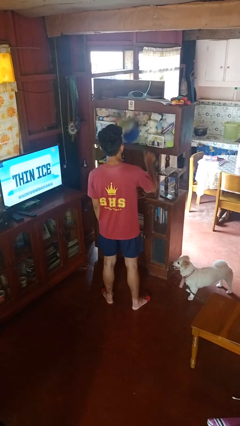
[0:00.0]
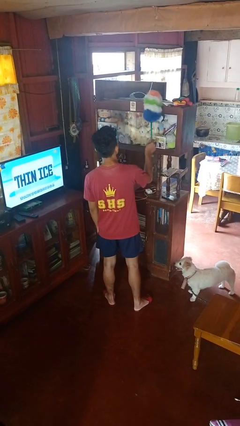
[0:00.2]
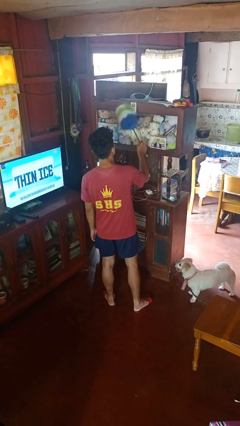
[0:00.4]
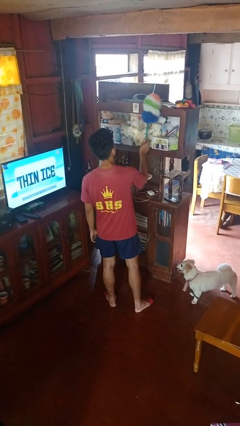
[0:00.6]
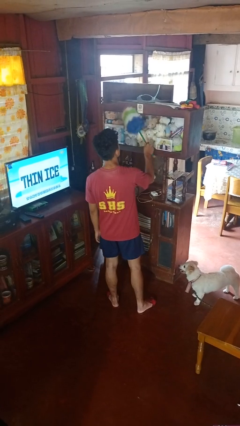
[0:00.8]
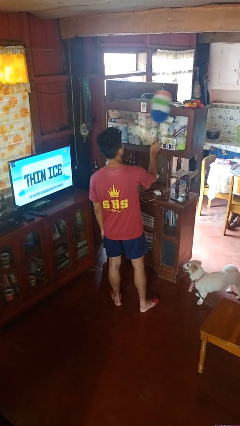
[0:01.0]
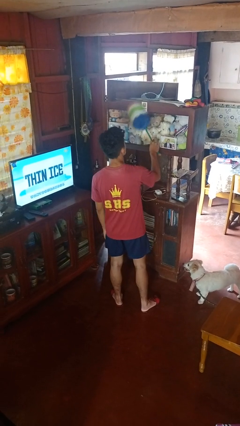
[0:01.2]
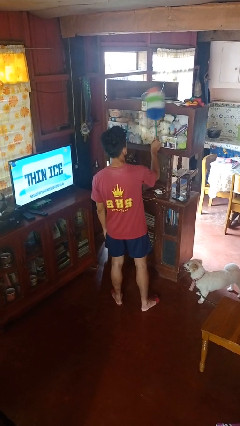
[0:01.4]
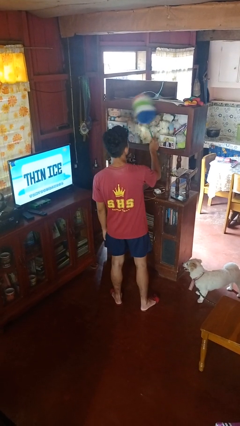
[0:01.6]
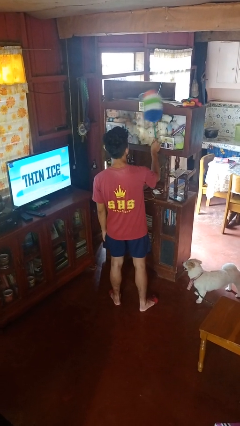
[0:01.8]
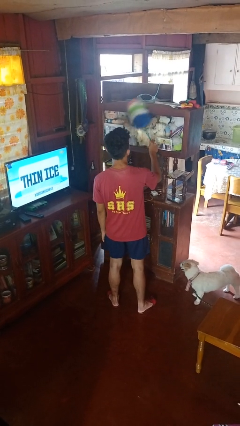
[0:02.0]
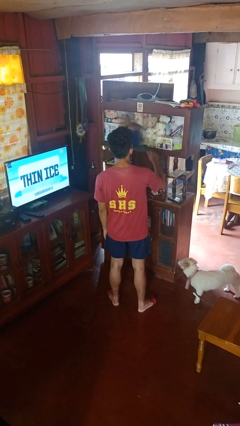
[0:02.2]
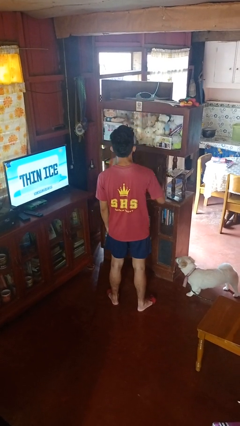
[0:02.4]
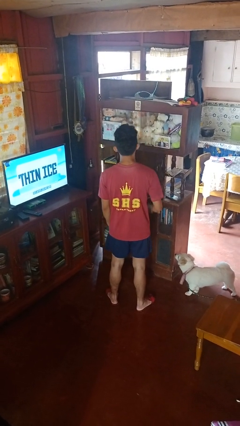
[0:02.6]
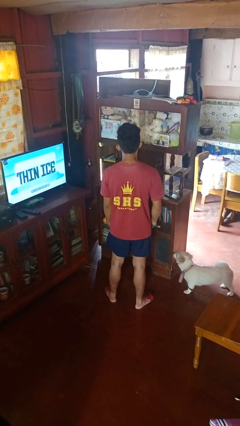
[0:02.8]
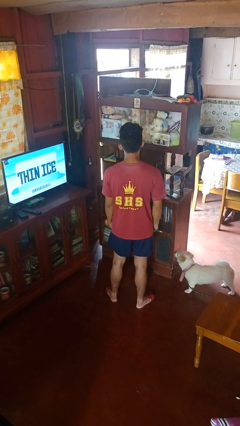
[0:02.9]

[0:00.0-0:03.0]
person dusts furniture

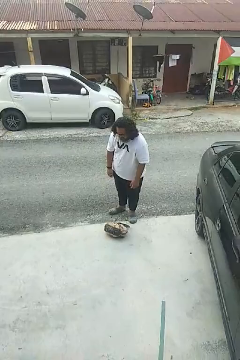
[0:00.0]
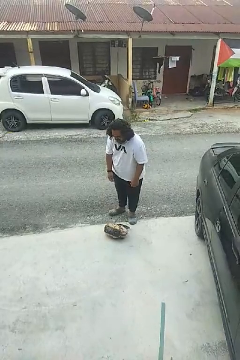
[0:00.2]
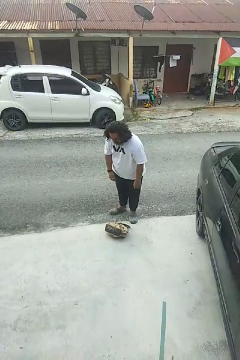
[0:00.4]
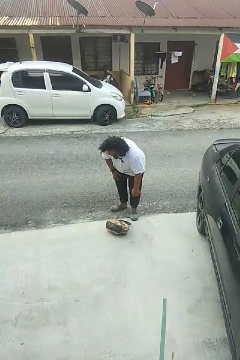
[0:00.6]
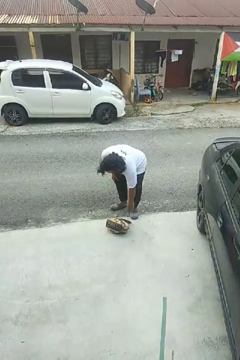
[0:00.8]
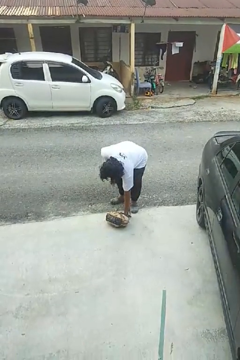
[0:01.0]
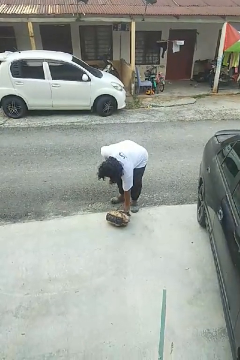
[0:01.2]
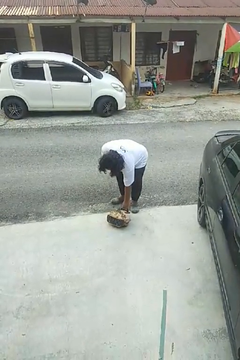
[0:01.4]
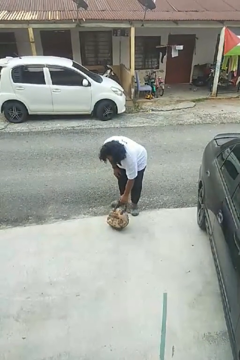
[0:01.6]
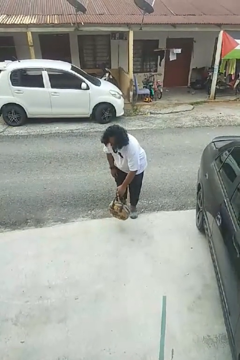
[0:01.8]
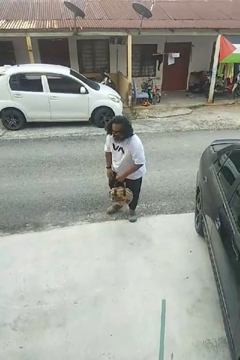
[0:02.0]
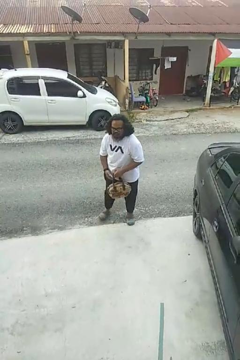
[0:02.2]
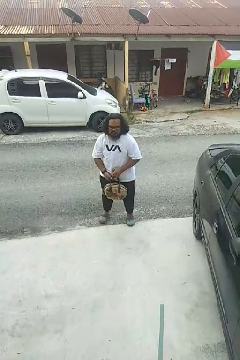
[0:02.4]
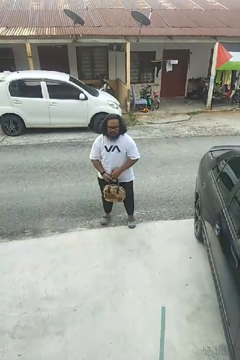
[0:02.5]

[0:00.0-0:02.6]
person picks up object from floor

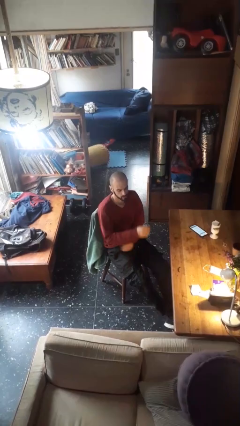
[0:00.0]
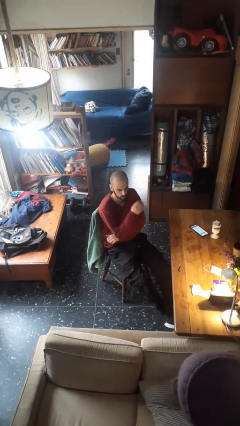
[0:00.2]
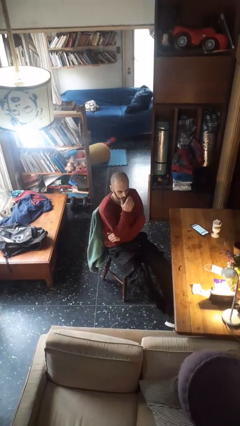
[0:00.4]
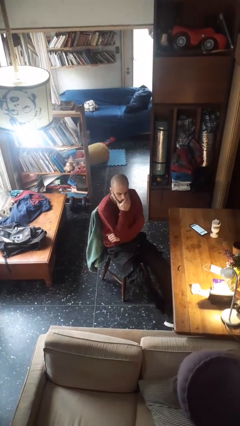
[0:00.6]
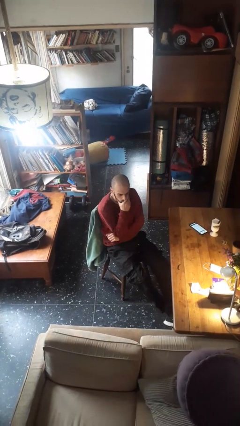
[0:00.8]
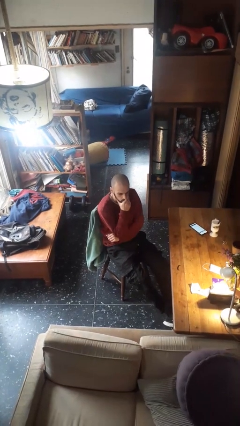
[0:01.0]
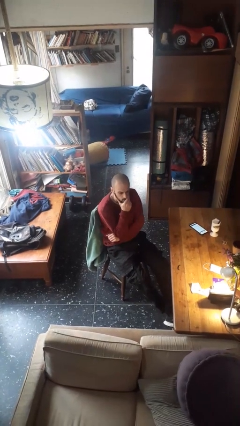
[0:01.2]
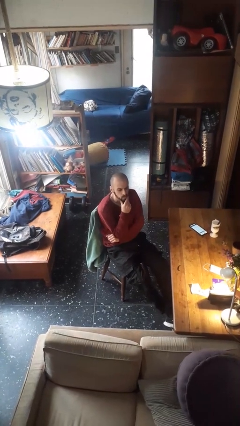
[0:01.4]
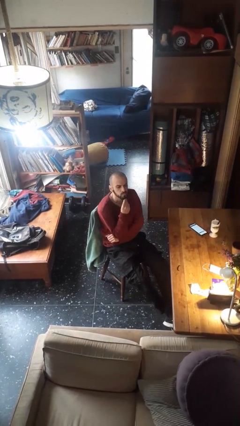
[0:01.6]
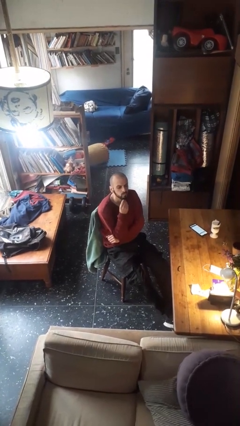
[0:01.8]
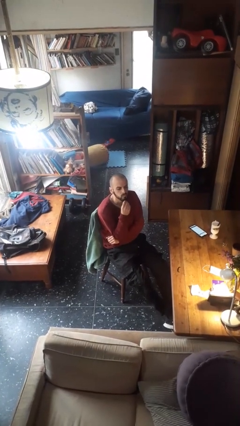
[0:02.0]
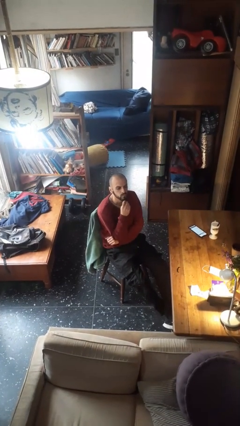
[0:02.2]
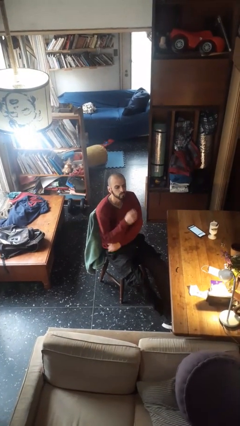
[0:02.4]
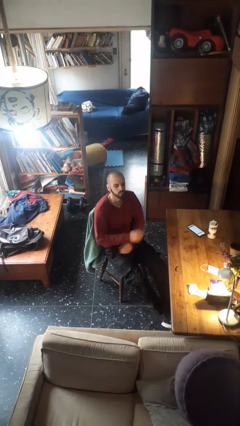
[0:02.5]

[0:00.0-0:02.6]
person strokes chin

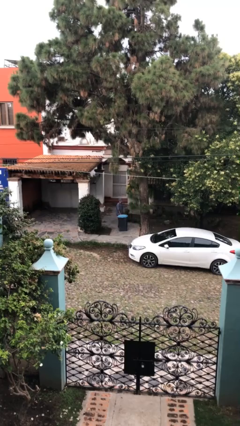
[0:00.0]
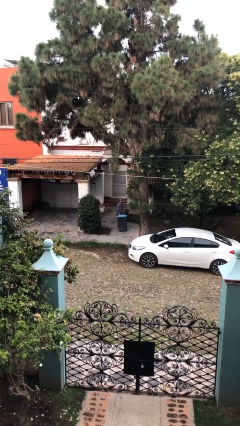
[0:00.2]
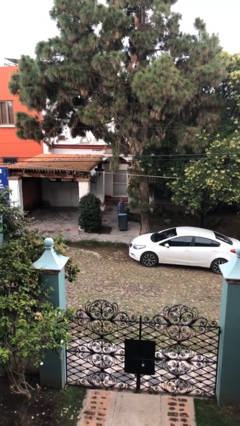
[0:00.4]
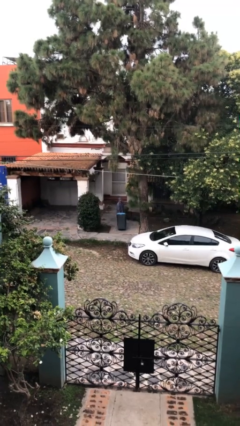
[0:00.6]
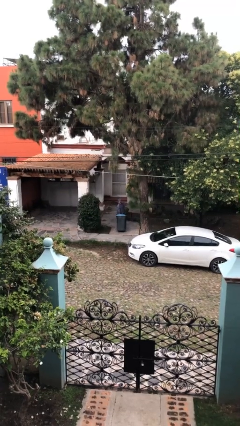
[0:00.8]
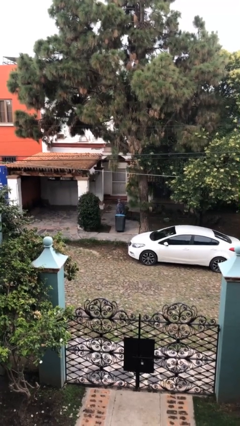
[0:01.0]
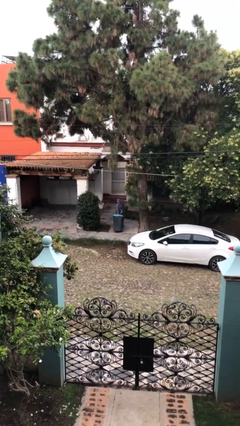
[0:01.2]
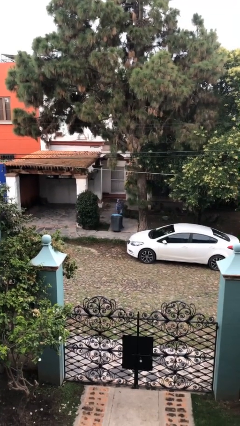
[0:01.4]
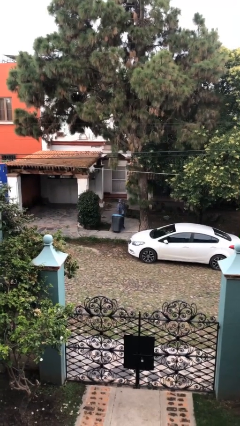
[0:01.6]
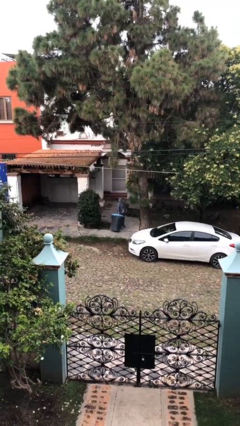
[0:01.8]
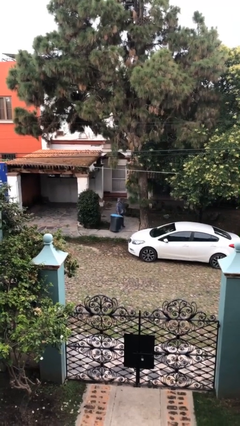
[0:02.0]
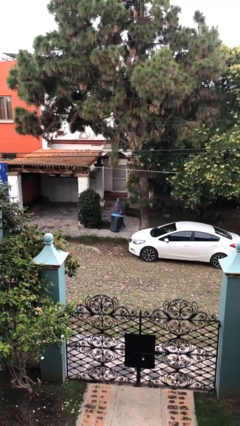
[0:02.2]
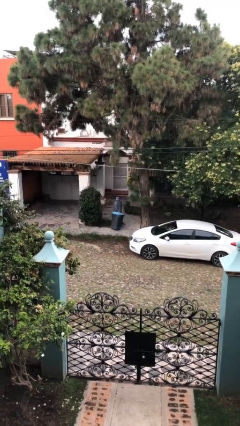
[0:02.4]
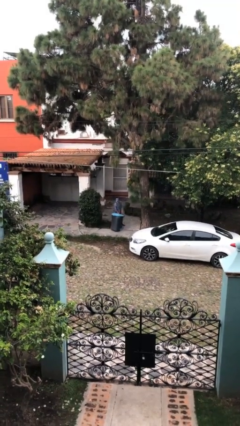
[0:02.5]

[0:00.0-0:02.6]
person pushes wheeled trashcan

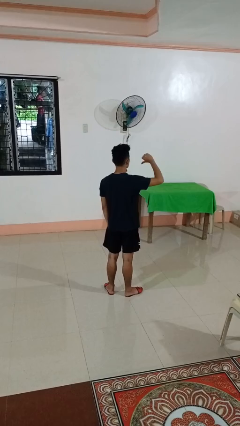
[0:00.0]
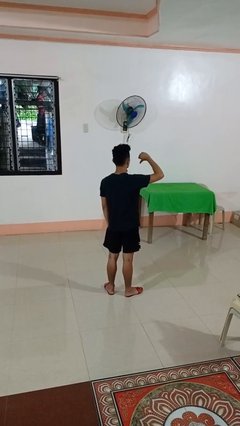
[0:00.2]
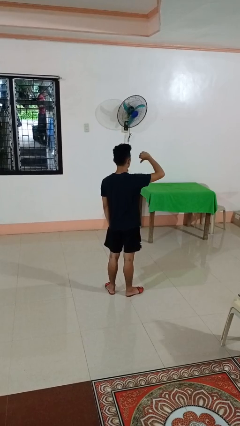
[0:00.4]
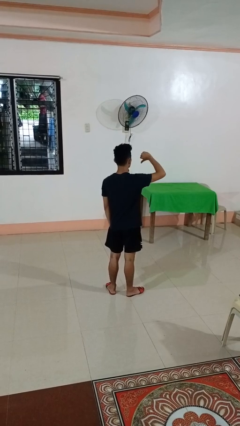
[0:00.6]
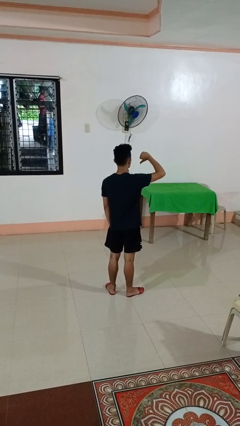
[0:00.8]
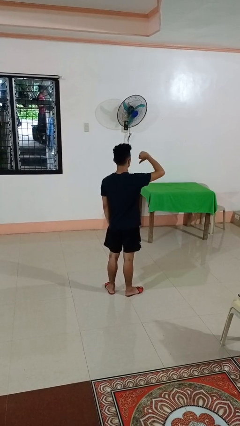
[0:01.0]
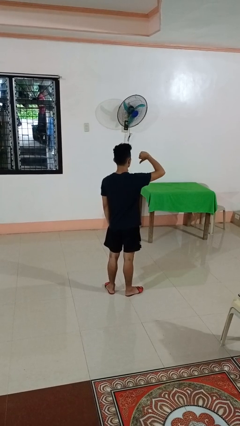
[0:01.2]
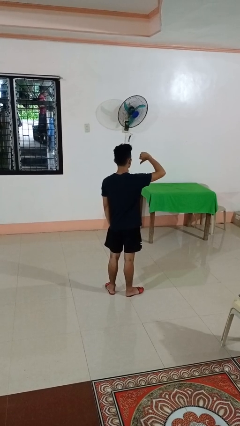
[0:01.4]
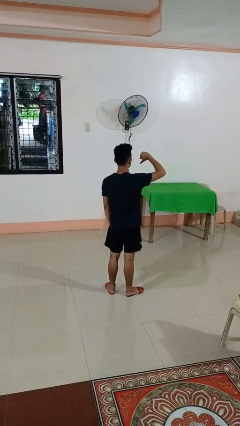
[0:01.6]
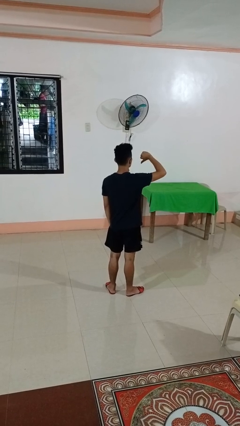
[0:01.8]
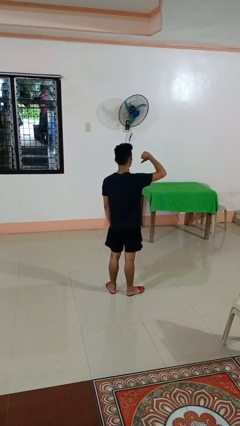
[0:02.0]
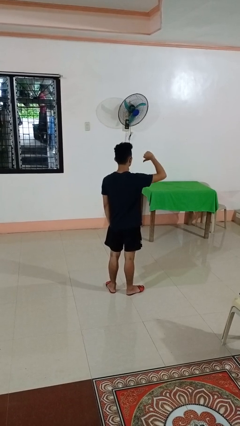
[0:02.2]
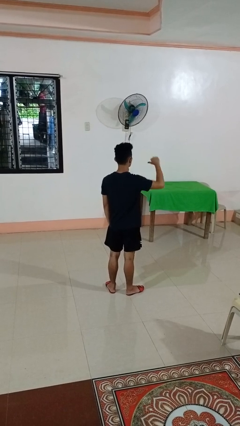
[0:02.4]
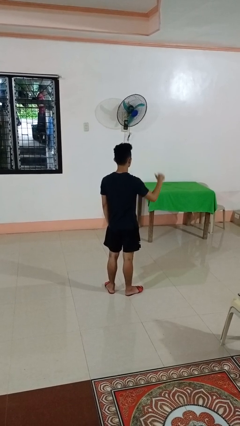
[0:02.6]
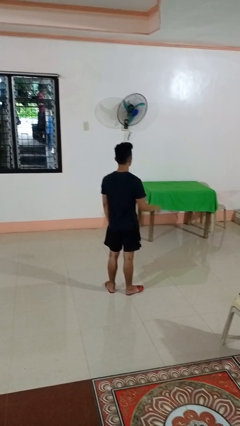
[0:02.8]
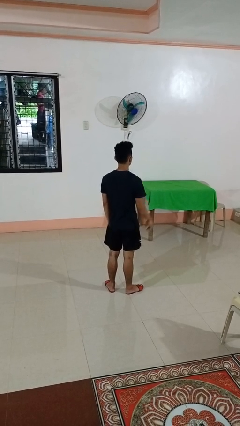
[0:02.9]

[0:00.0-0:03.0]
person gestures thumbs down

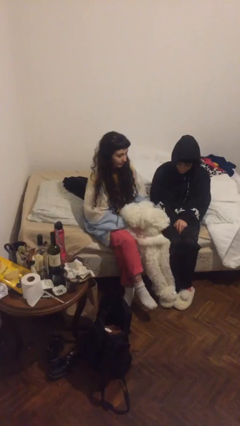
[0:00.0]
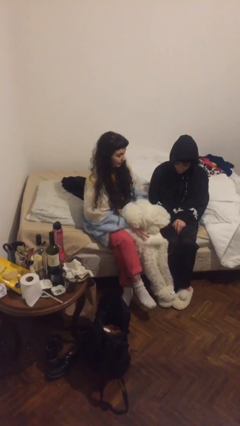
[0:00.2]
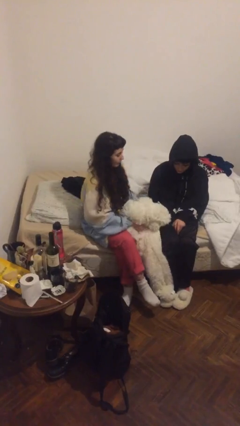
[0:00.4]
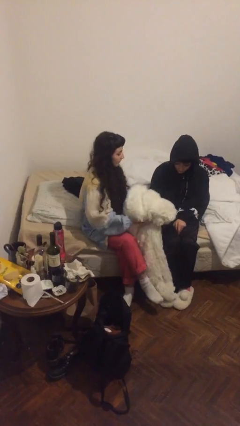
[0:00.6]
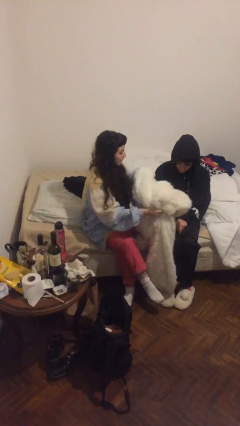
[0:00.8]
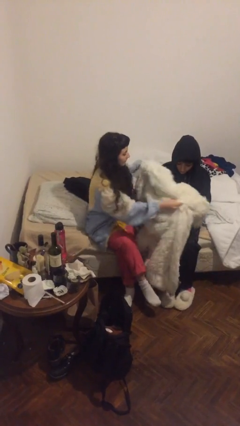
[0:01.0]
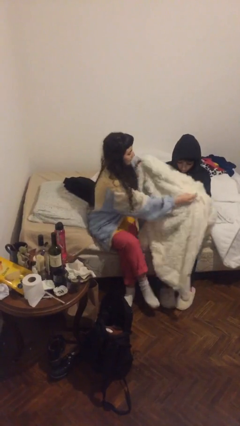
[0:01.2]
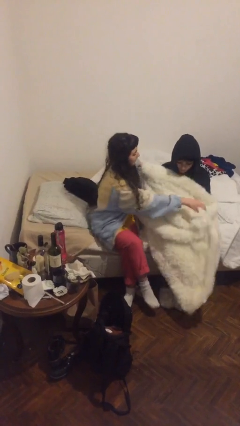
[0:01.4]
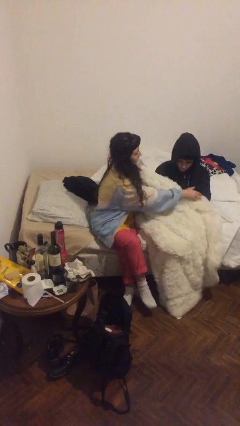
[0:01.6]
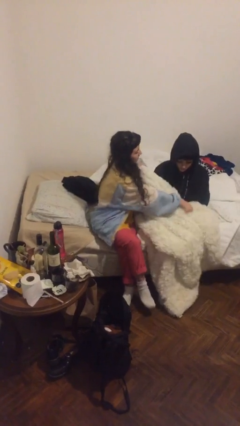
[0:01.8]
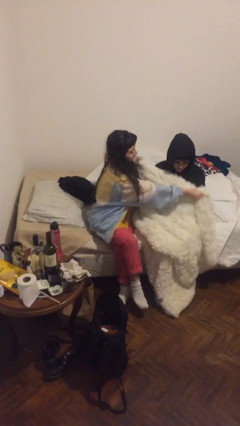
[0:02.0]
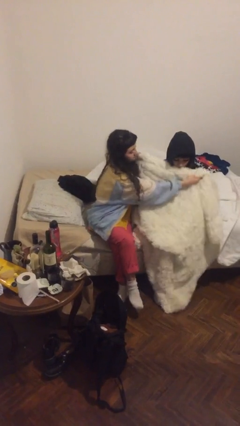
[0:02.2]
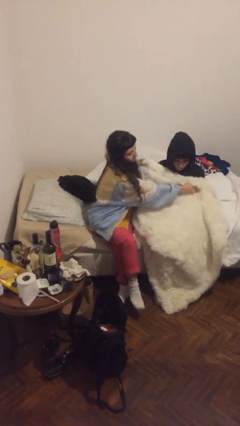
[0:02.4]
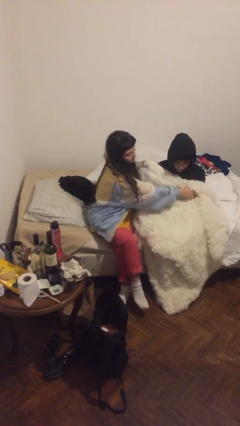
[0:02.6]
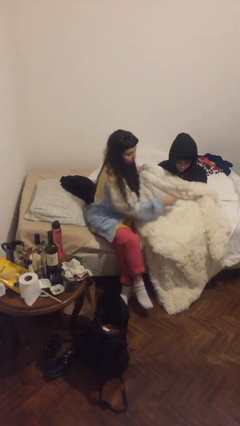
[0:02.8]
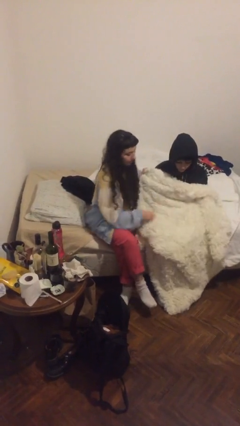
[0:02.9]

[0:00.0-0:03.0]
person covers friend with blanket

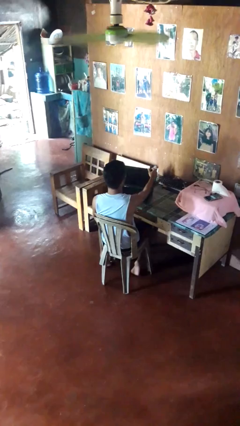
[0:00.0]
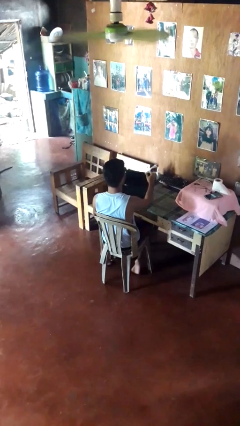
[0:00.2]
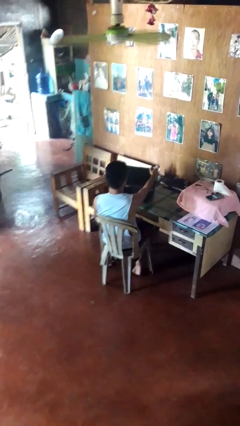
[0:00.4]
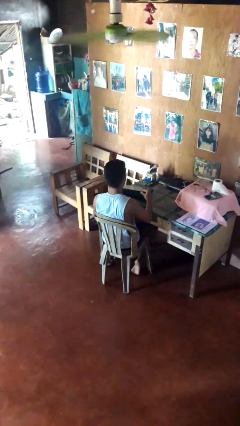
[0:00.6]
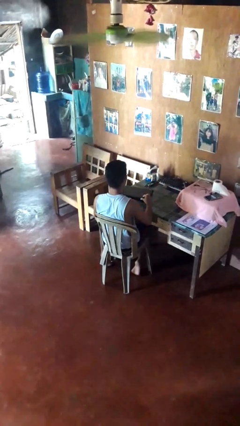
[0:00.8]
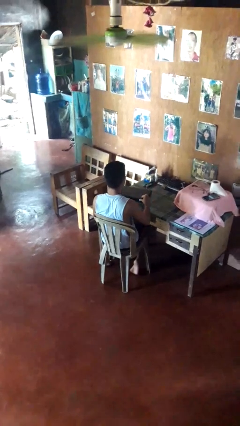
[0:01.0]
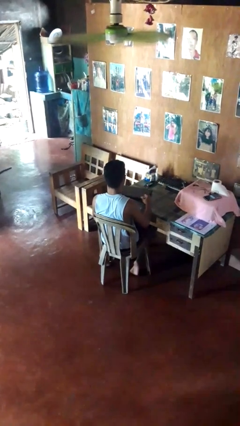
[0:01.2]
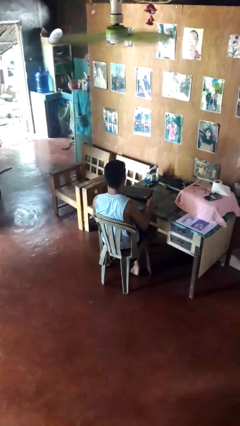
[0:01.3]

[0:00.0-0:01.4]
person closes laptop
